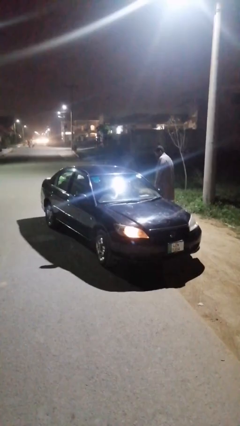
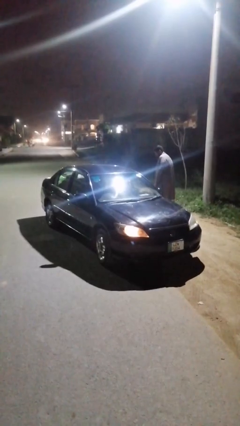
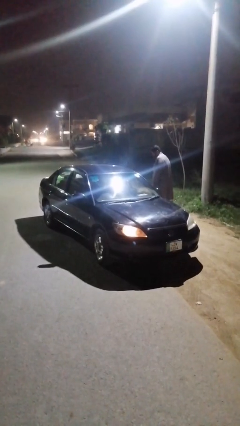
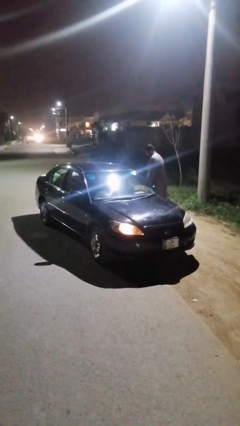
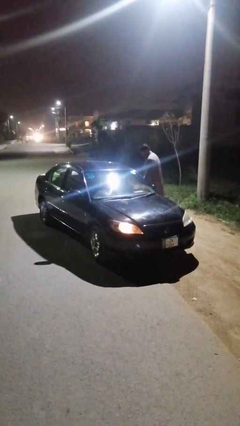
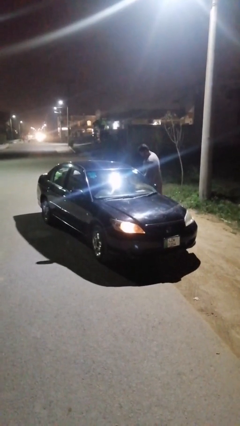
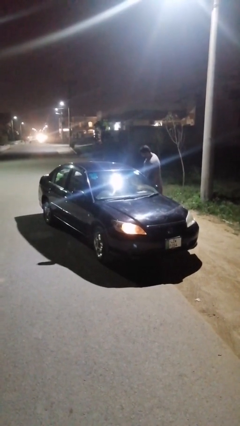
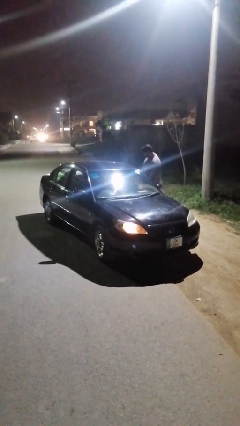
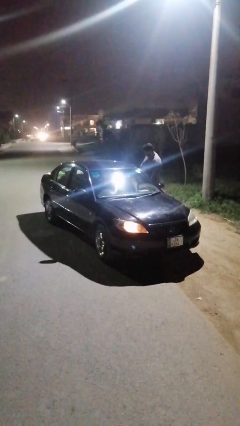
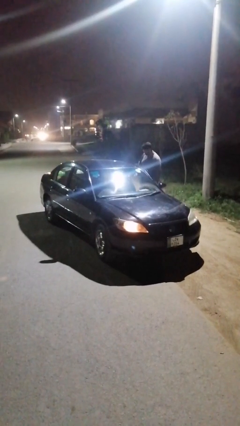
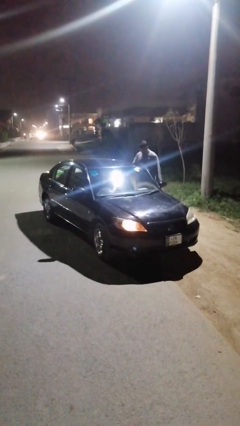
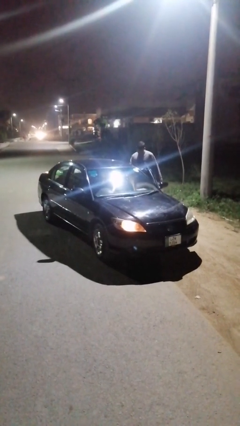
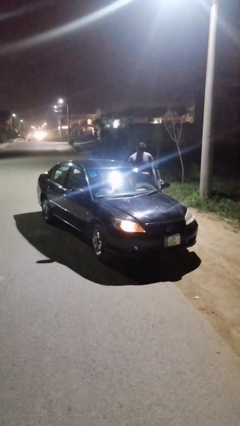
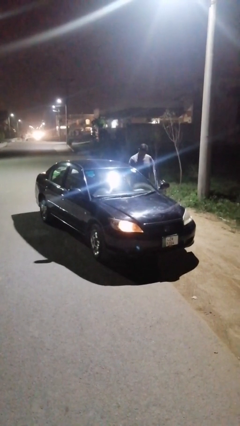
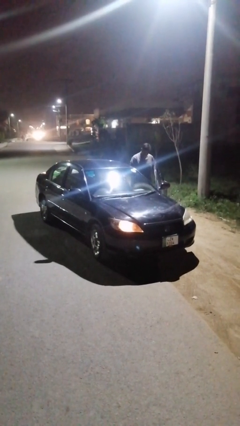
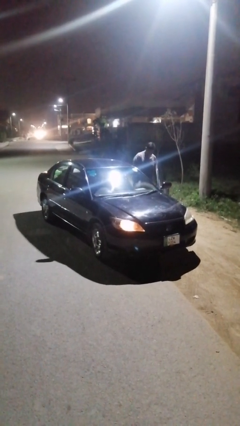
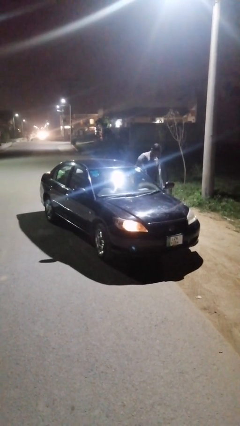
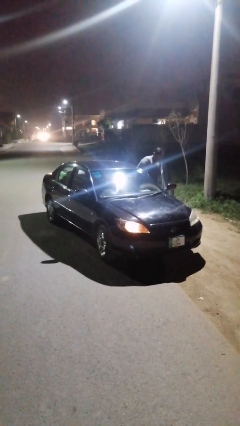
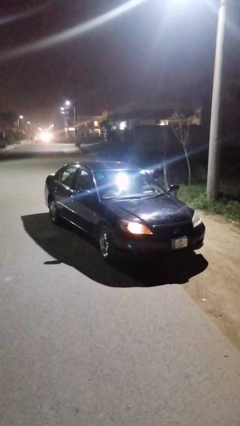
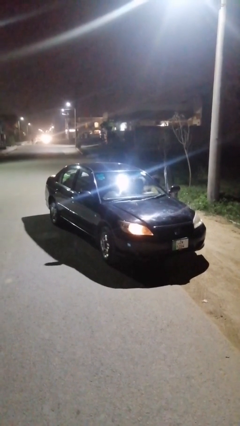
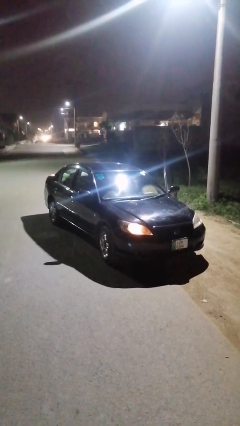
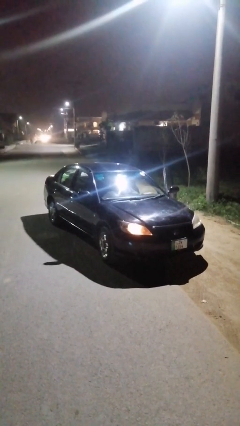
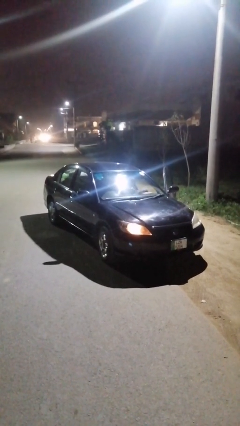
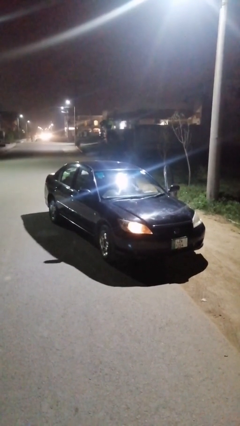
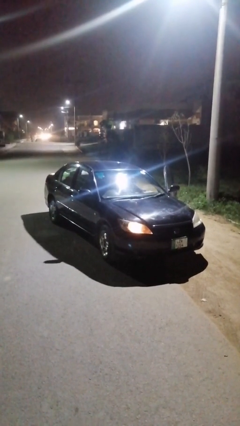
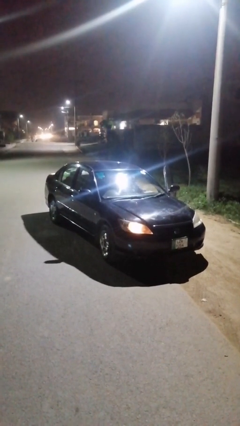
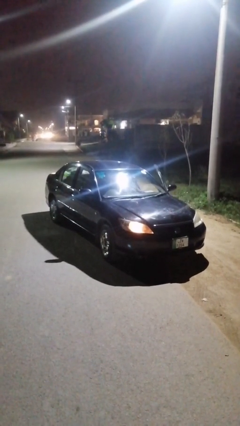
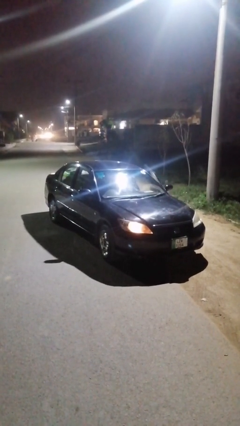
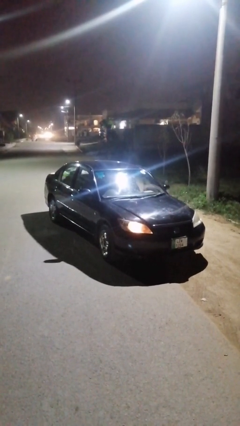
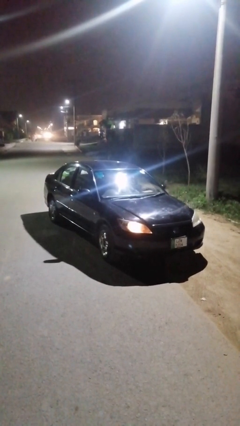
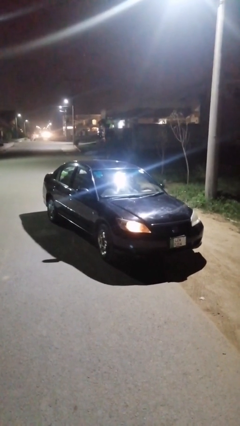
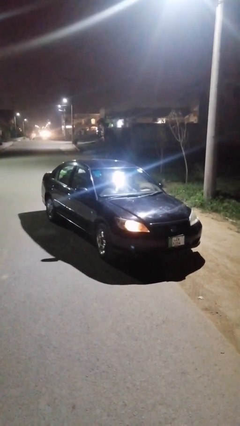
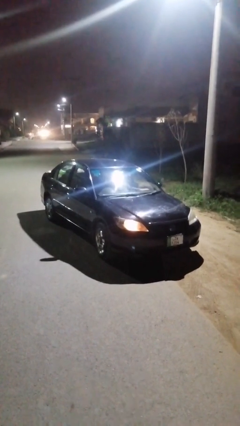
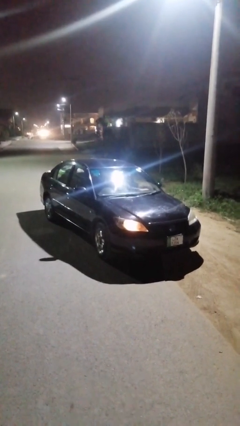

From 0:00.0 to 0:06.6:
car picks up person

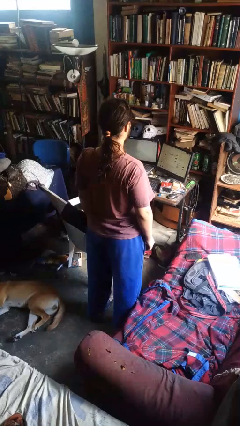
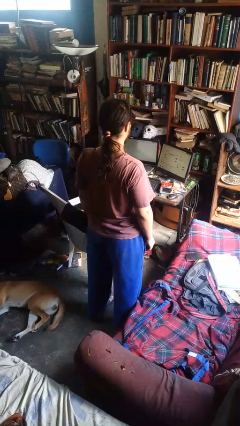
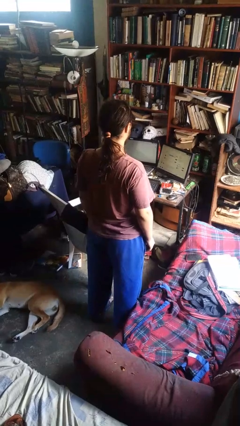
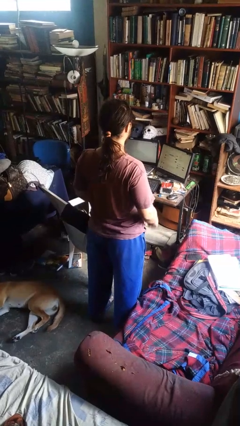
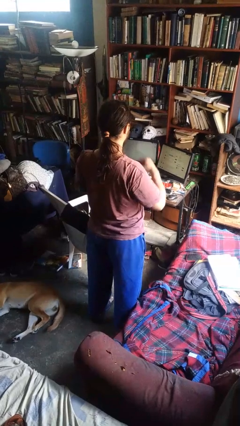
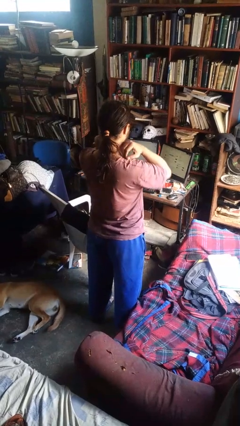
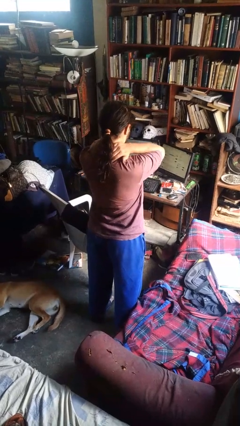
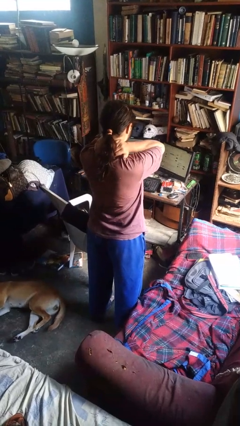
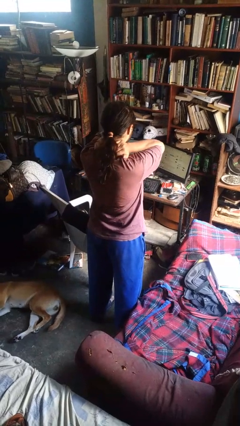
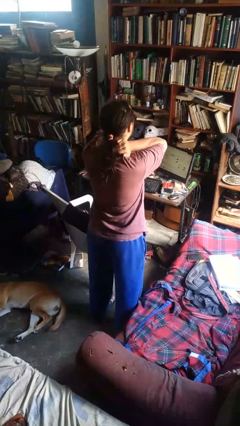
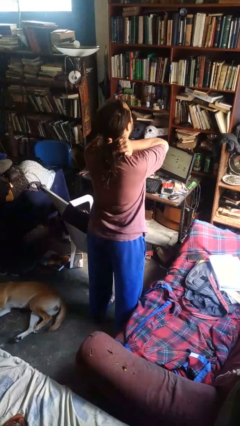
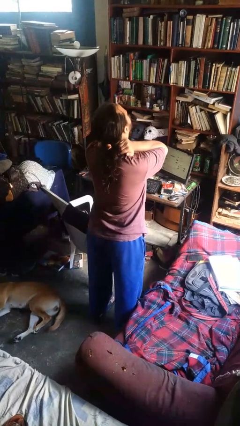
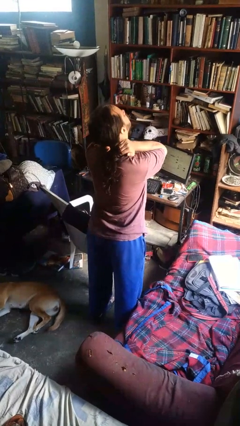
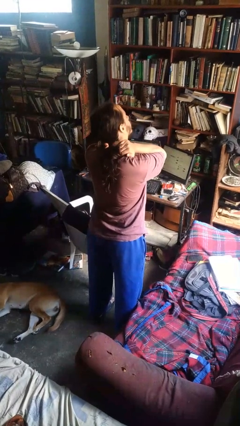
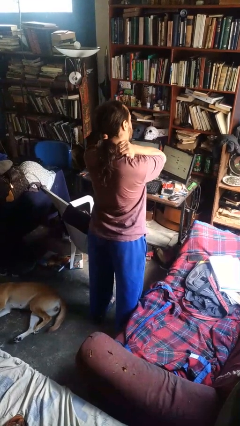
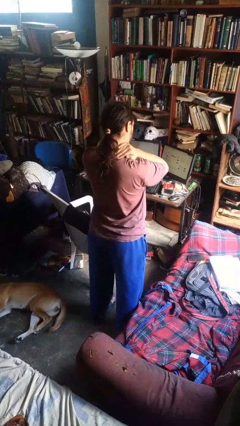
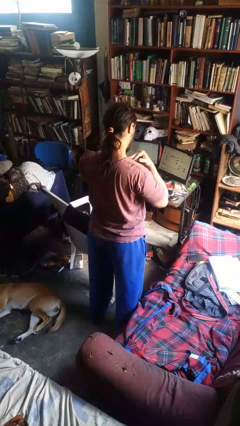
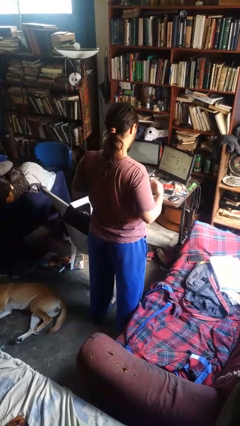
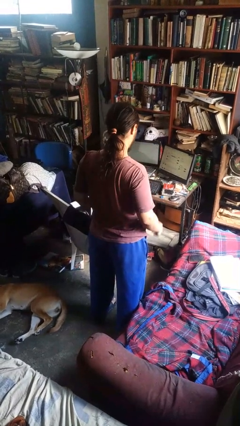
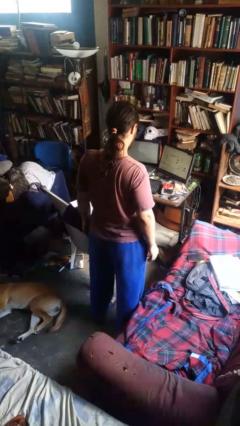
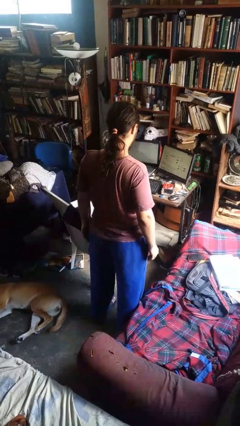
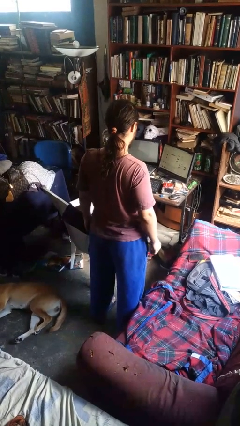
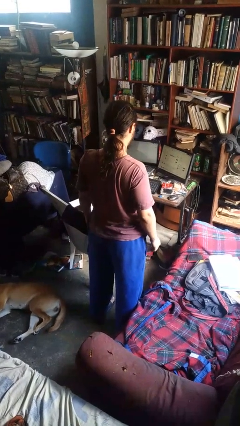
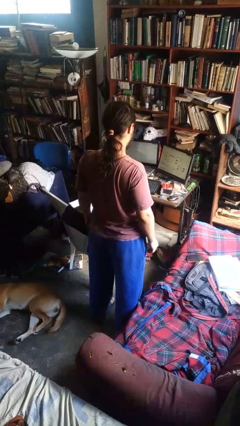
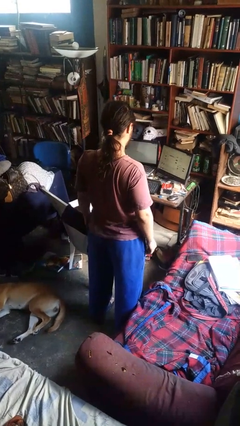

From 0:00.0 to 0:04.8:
person rubs neck

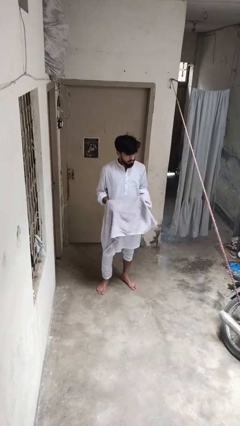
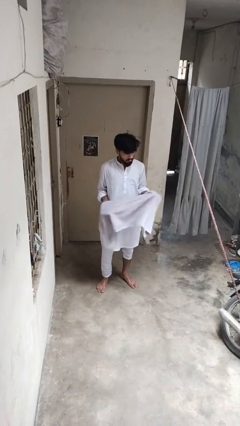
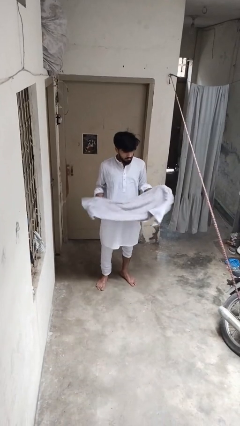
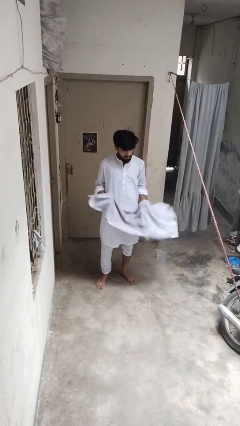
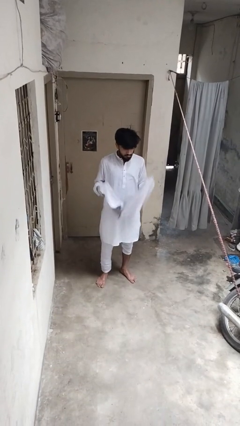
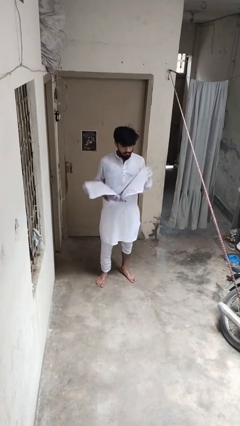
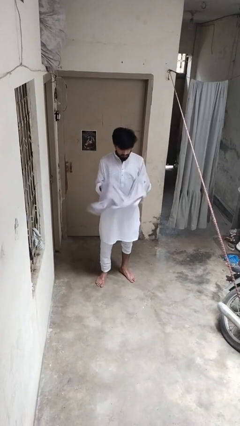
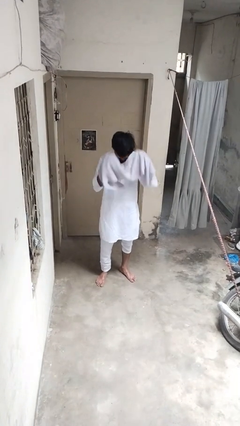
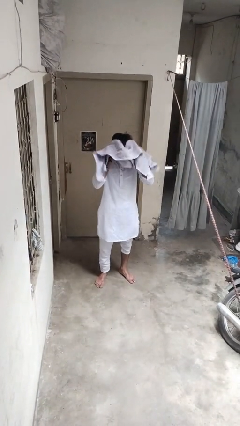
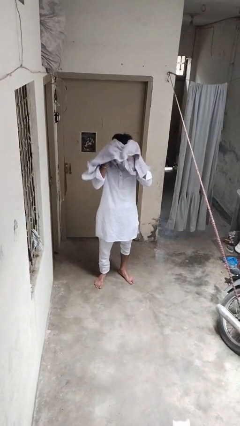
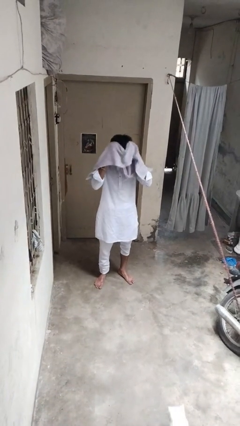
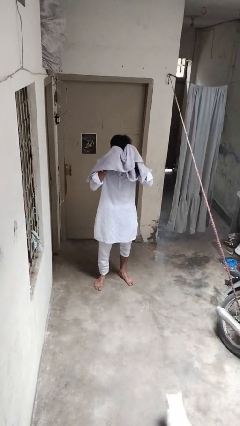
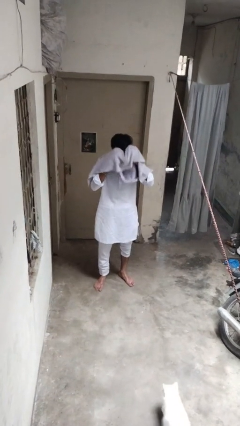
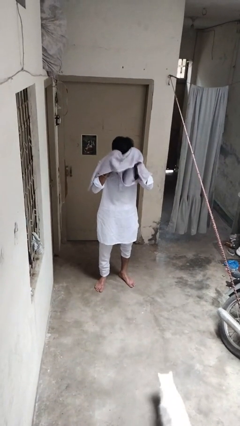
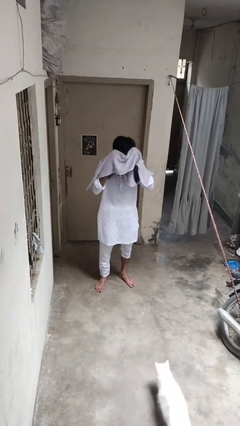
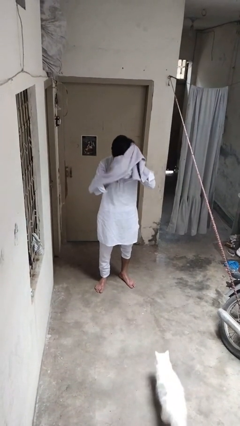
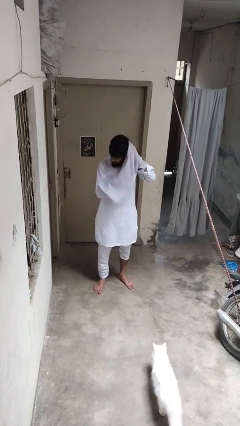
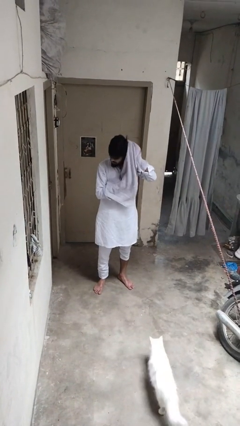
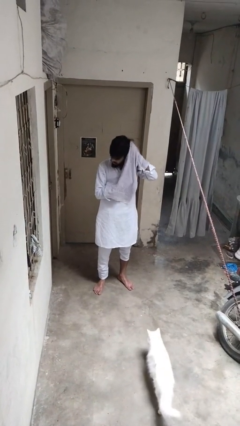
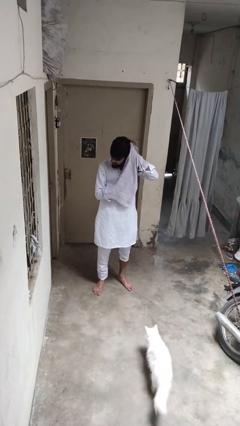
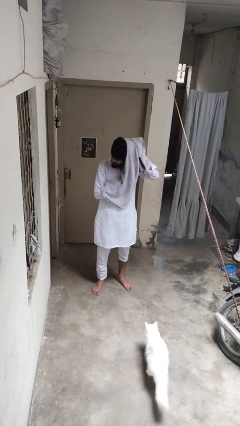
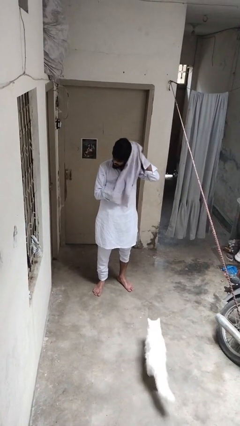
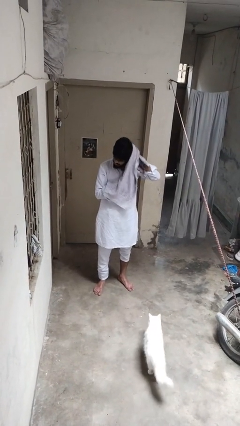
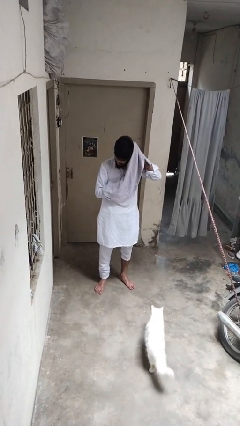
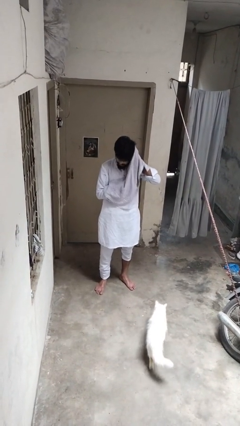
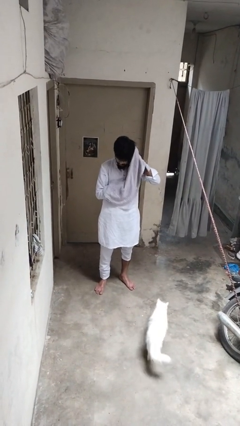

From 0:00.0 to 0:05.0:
person dries hair with towel

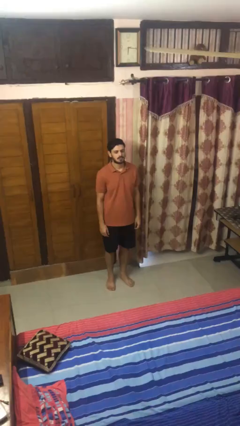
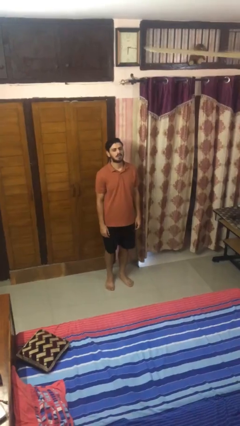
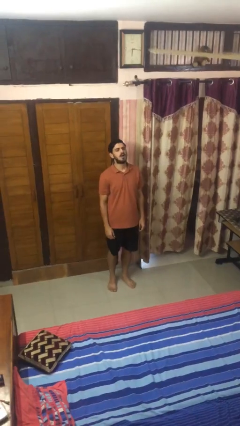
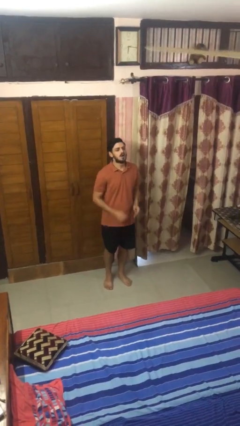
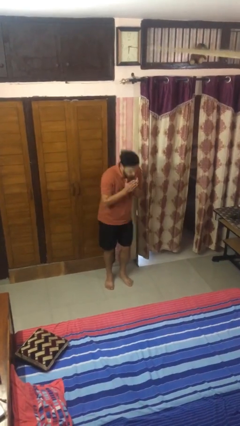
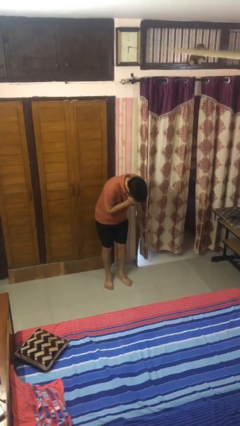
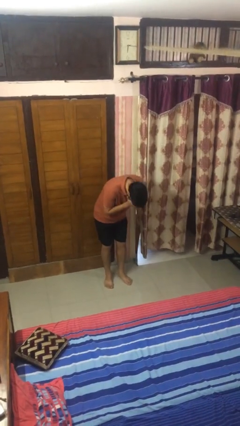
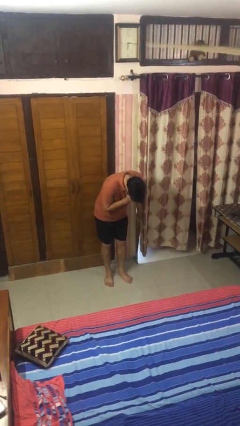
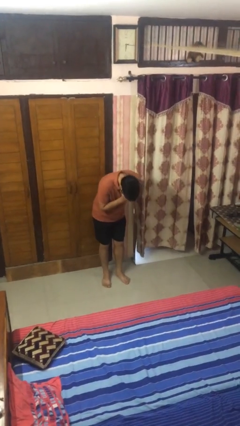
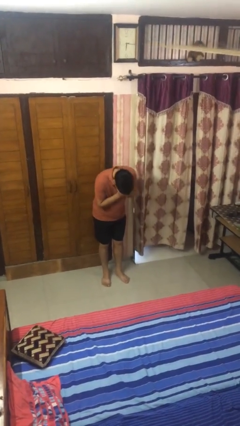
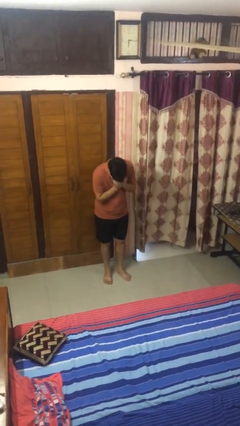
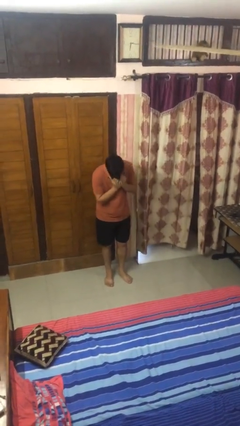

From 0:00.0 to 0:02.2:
person sneezes into hand
